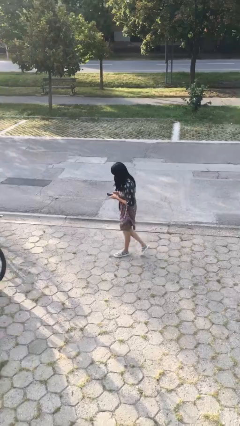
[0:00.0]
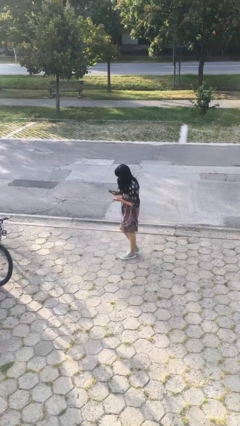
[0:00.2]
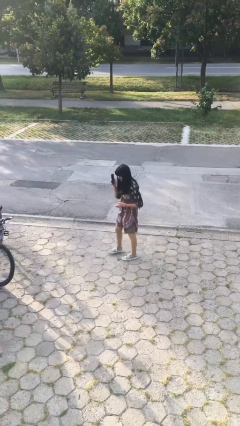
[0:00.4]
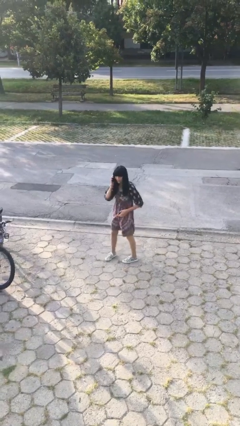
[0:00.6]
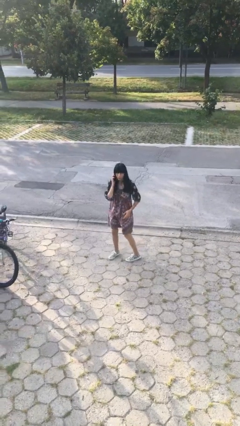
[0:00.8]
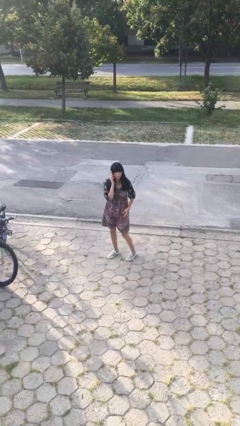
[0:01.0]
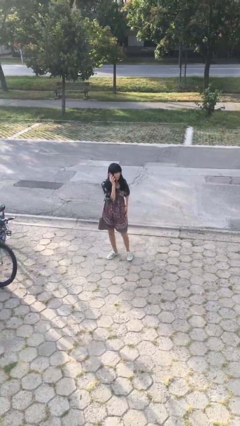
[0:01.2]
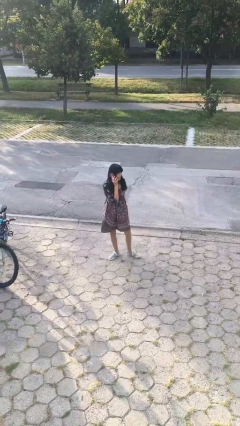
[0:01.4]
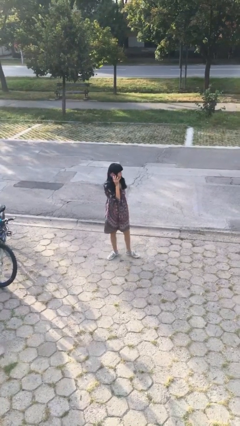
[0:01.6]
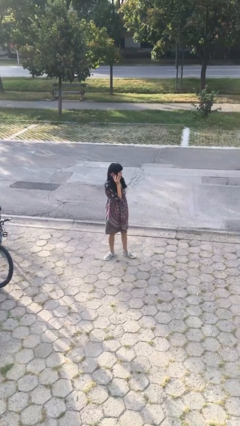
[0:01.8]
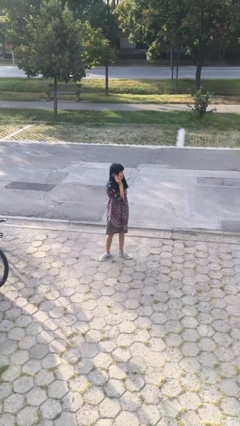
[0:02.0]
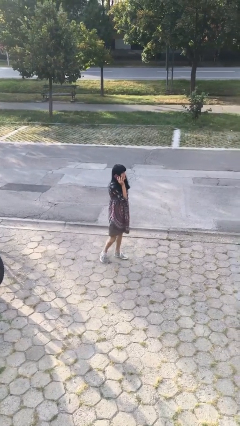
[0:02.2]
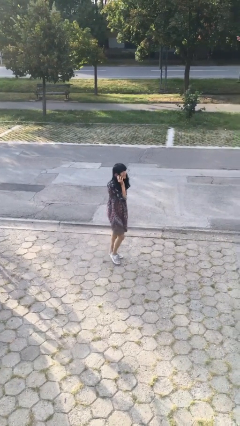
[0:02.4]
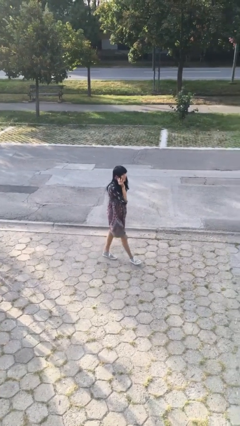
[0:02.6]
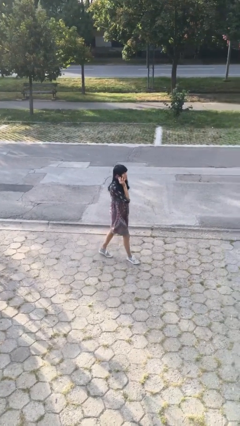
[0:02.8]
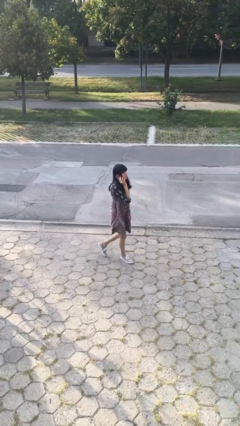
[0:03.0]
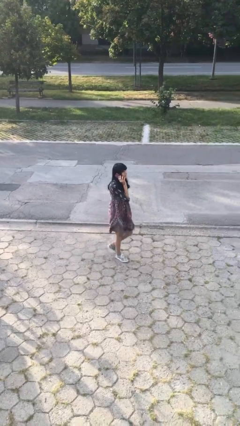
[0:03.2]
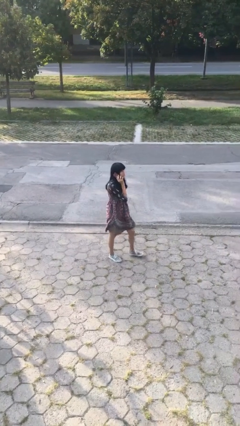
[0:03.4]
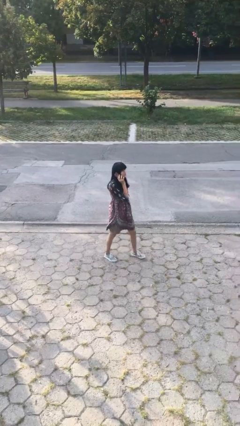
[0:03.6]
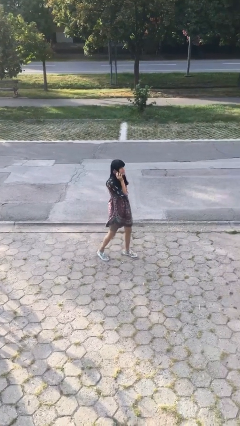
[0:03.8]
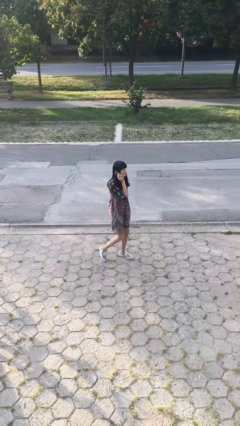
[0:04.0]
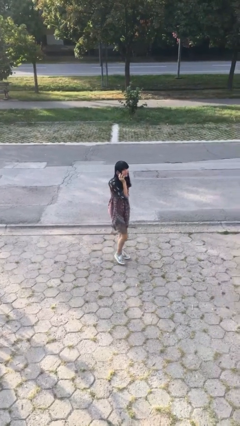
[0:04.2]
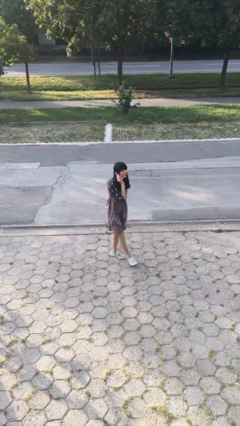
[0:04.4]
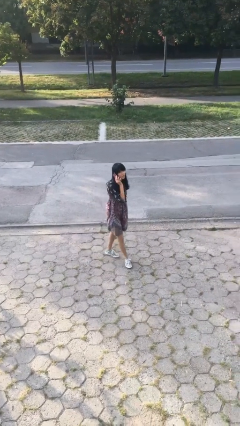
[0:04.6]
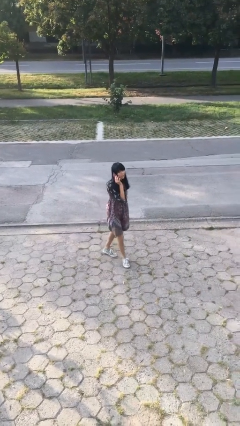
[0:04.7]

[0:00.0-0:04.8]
person talks on phone

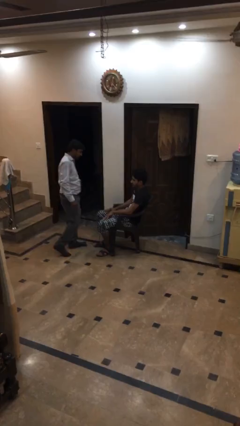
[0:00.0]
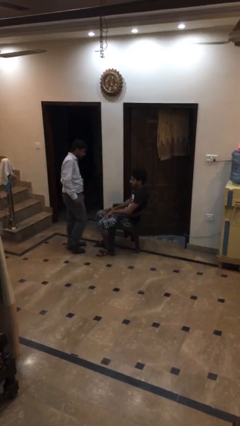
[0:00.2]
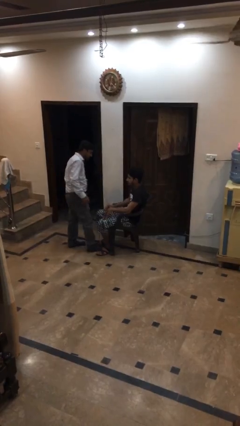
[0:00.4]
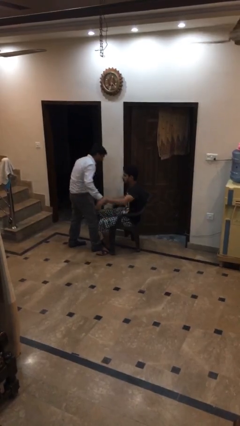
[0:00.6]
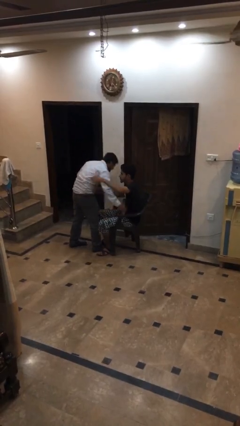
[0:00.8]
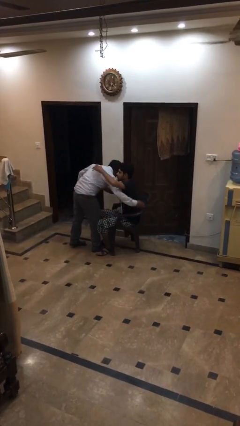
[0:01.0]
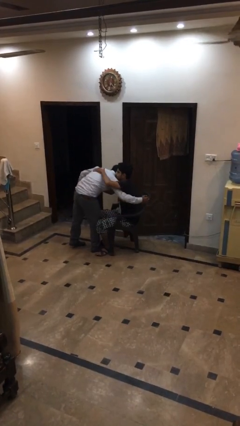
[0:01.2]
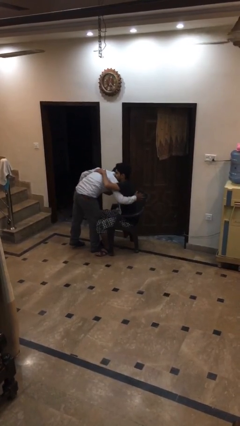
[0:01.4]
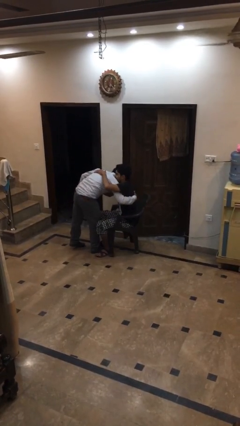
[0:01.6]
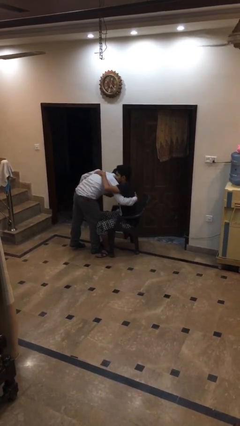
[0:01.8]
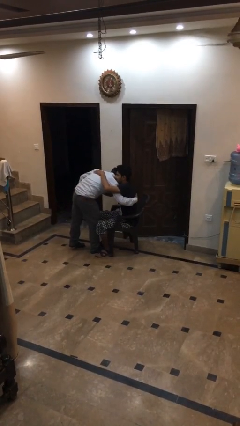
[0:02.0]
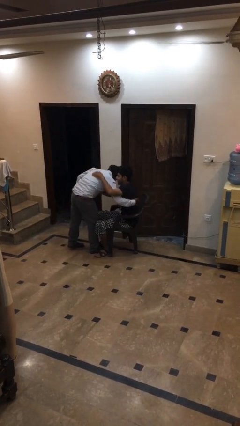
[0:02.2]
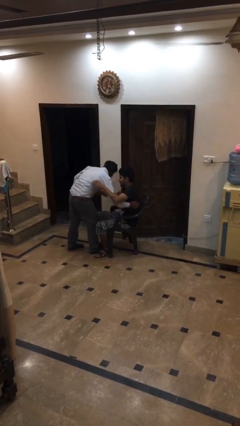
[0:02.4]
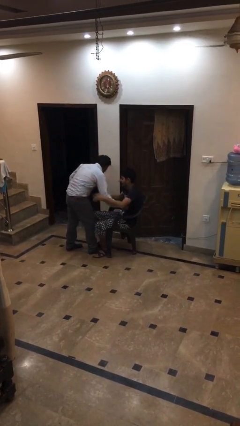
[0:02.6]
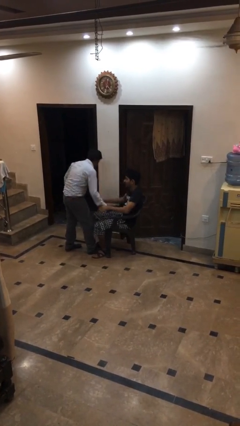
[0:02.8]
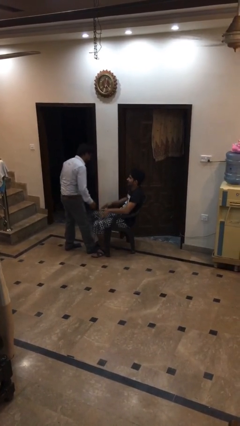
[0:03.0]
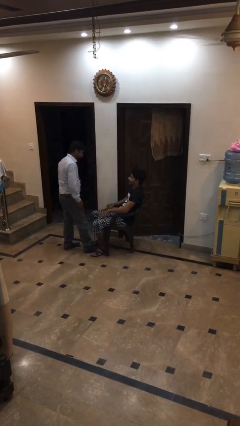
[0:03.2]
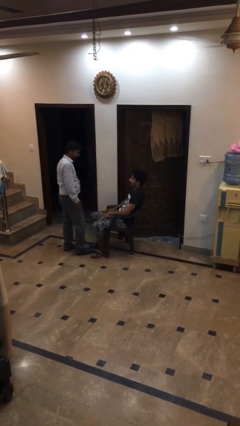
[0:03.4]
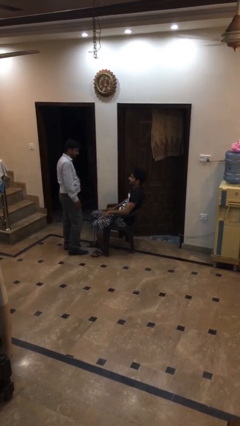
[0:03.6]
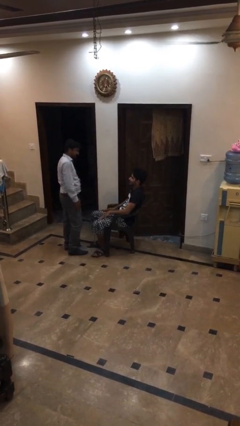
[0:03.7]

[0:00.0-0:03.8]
person embraces person

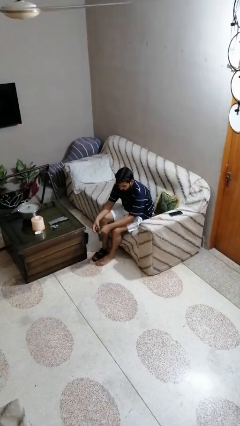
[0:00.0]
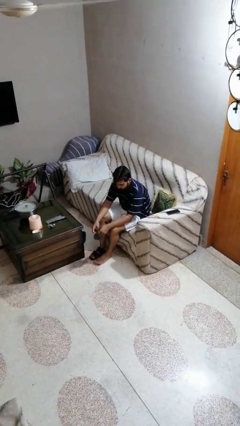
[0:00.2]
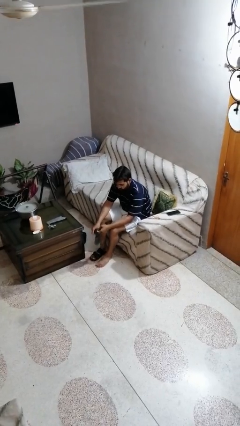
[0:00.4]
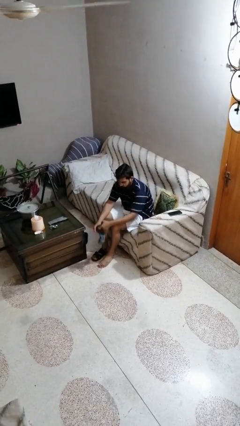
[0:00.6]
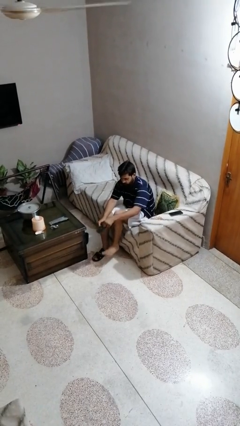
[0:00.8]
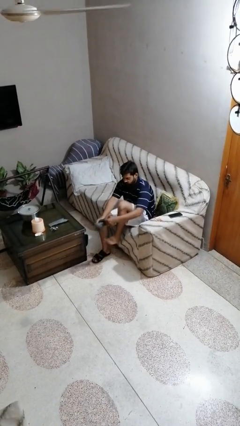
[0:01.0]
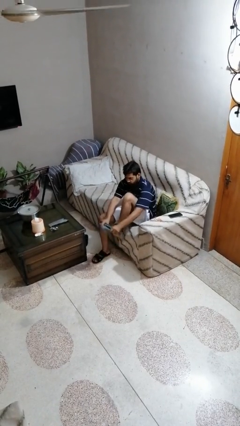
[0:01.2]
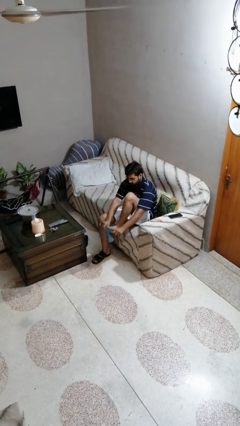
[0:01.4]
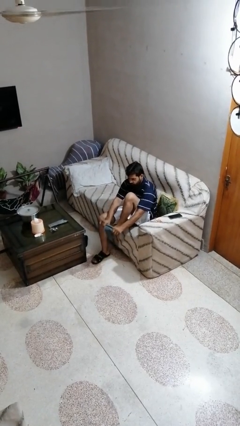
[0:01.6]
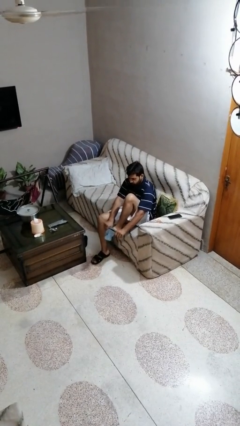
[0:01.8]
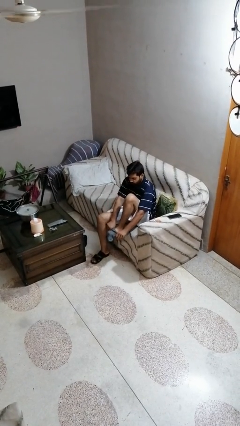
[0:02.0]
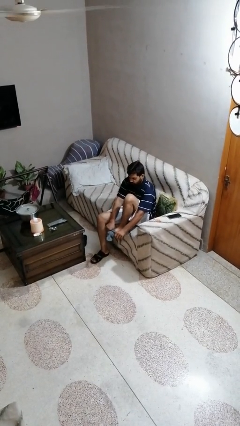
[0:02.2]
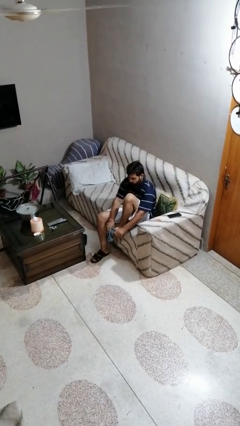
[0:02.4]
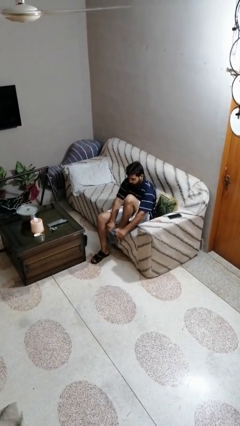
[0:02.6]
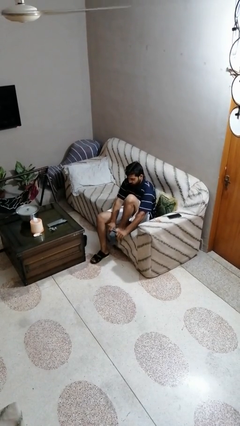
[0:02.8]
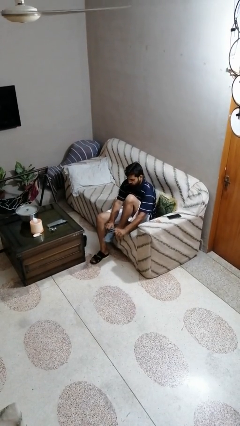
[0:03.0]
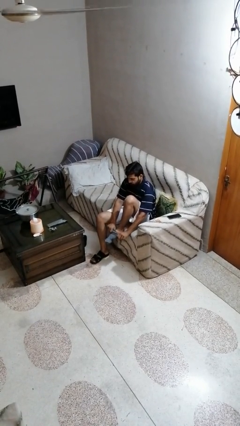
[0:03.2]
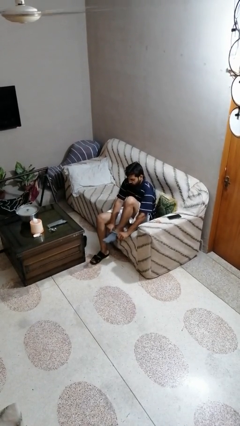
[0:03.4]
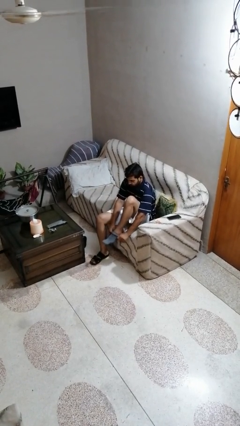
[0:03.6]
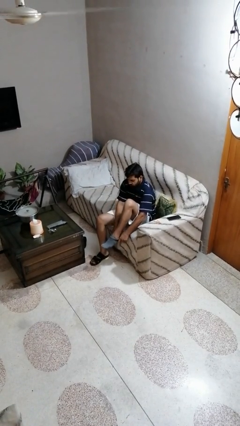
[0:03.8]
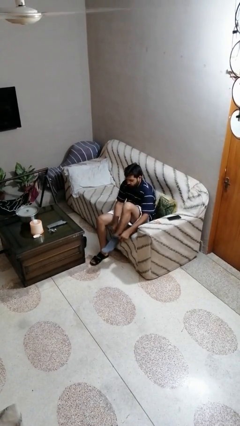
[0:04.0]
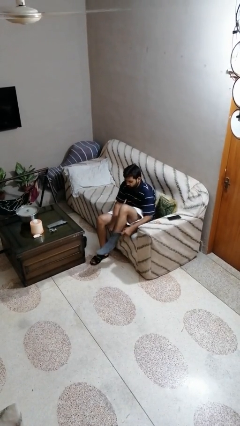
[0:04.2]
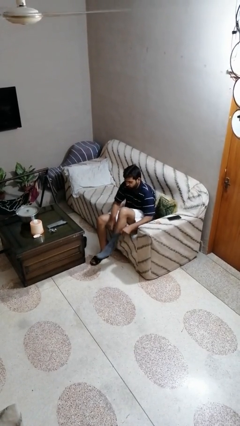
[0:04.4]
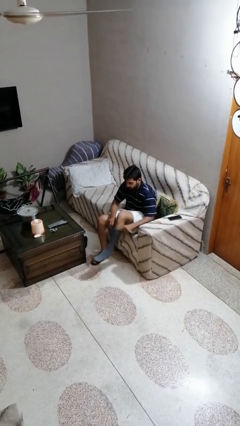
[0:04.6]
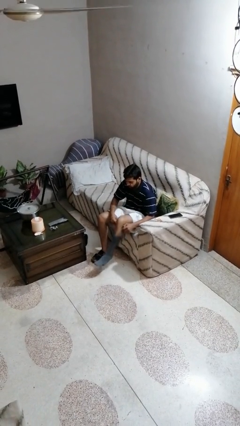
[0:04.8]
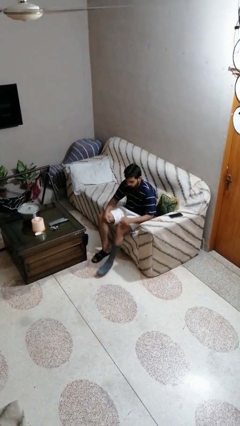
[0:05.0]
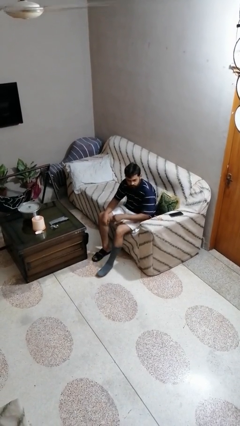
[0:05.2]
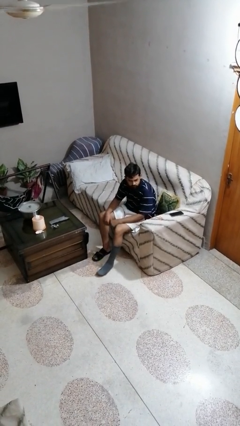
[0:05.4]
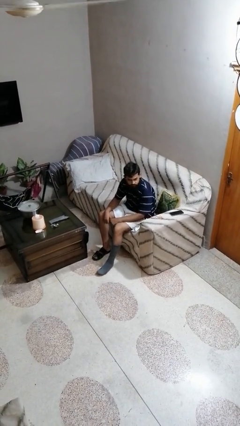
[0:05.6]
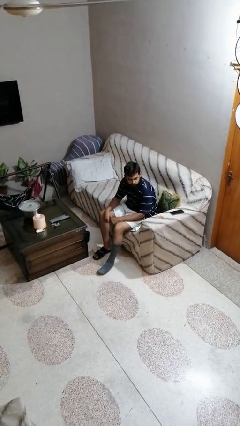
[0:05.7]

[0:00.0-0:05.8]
person puts on socks

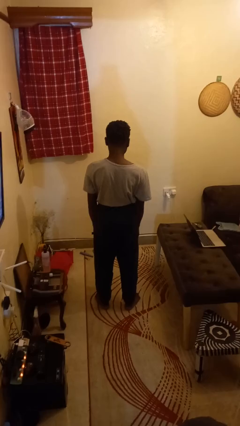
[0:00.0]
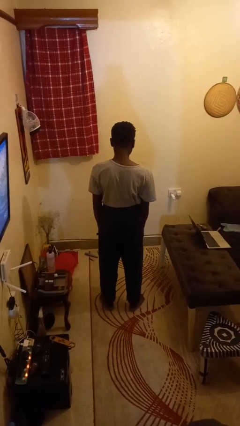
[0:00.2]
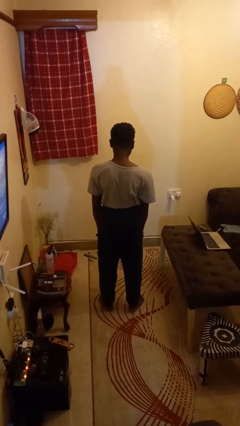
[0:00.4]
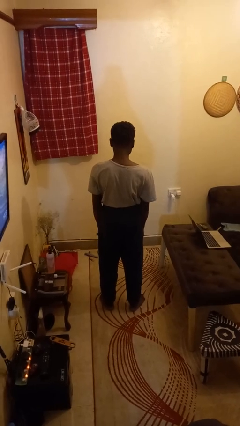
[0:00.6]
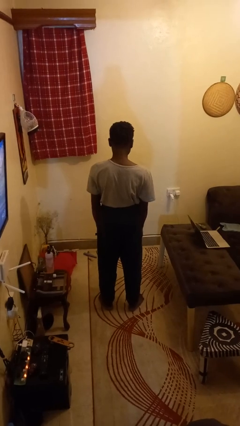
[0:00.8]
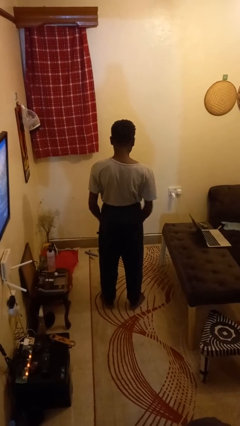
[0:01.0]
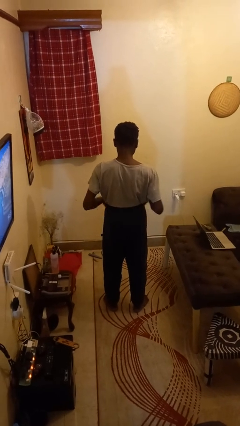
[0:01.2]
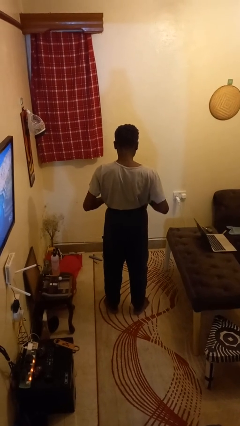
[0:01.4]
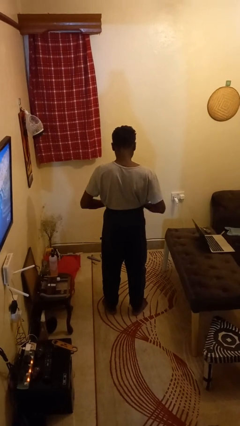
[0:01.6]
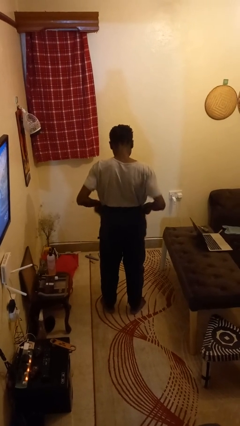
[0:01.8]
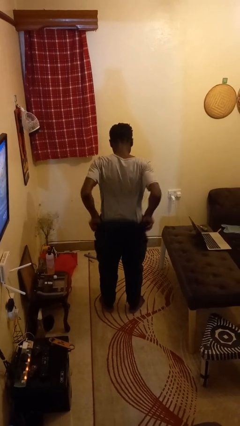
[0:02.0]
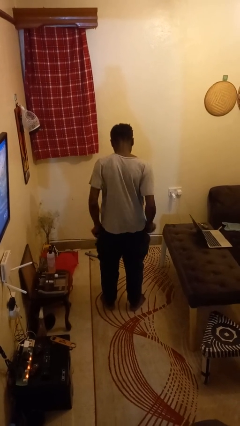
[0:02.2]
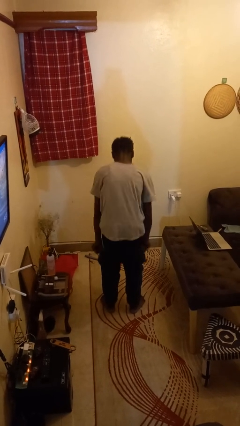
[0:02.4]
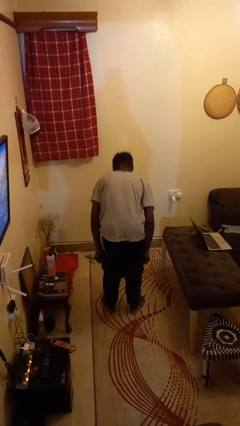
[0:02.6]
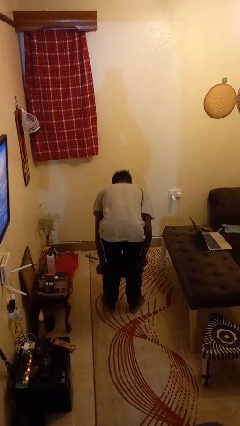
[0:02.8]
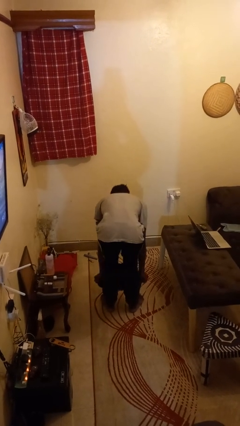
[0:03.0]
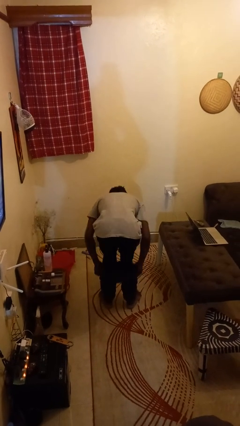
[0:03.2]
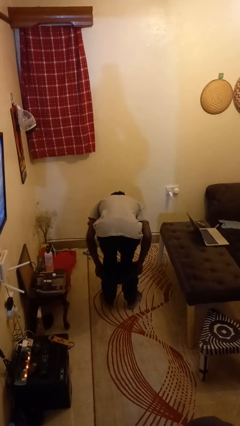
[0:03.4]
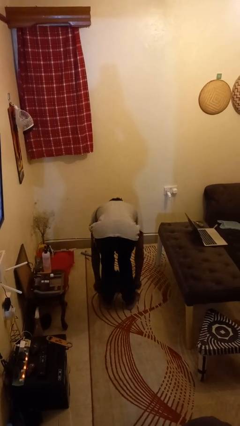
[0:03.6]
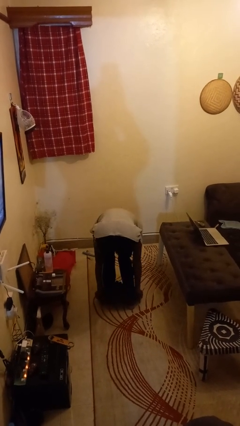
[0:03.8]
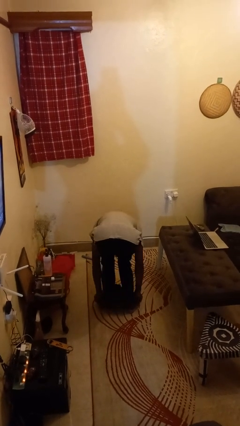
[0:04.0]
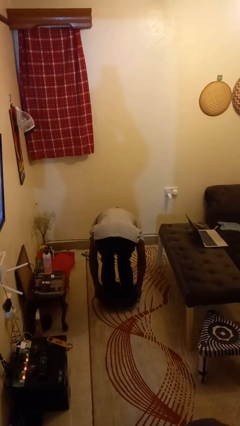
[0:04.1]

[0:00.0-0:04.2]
person takes off pants
